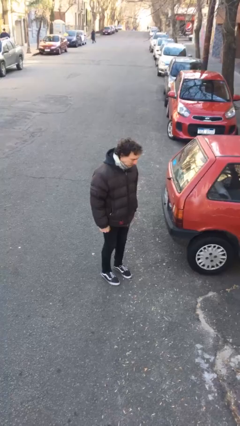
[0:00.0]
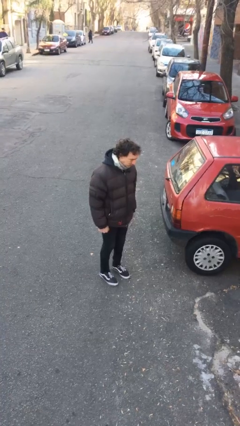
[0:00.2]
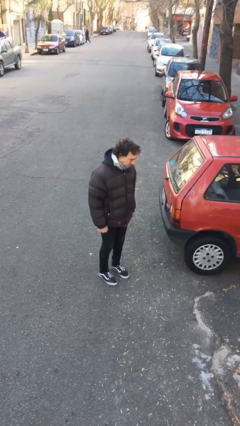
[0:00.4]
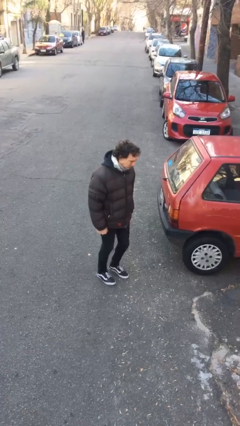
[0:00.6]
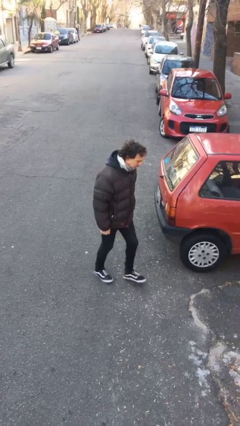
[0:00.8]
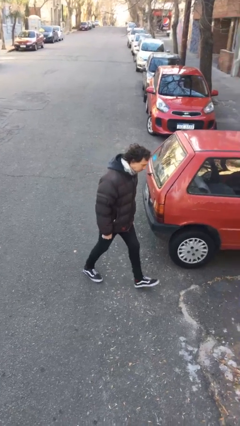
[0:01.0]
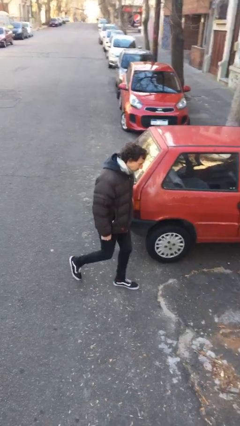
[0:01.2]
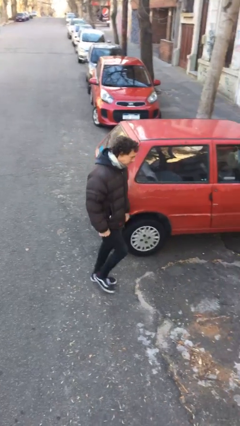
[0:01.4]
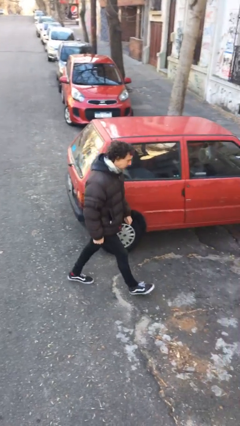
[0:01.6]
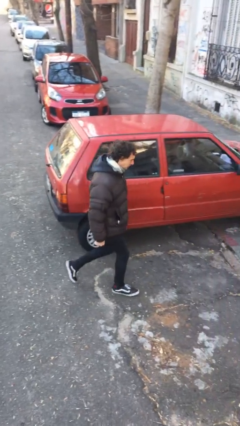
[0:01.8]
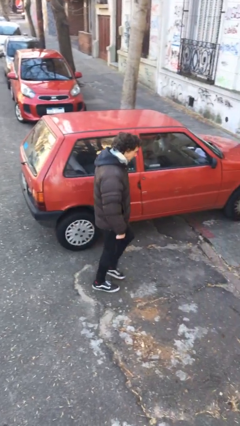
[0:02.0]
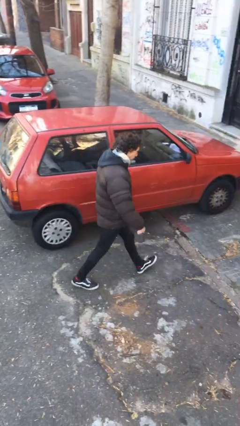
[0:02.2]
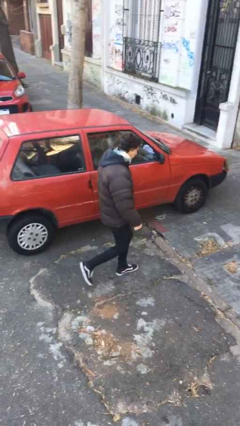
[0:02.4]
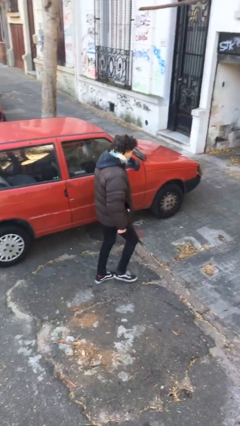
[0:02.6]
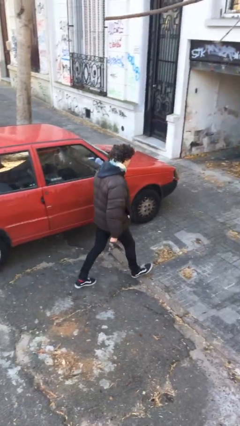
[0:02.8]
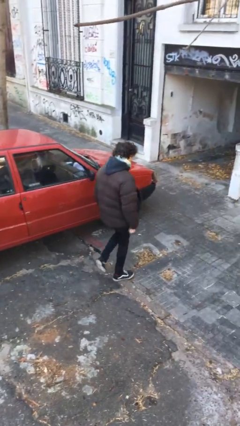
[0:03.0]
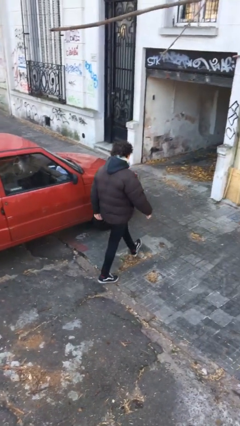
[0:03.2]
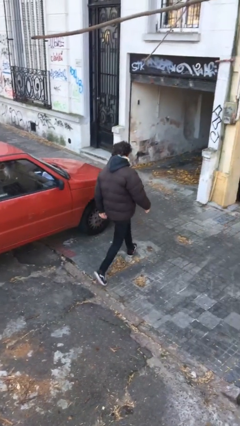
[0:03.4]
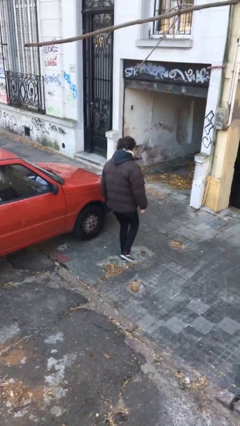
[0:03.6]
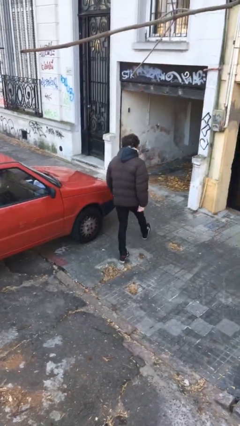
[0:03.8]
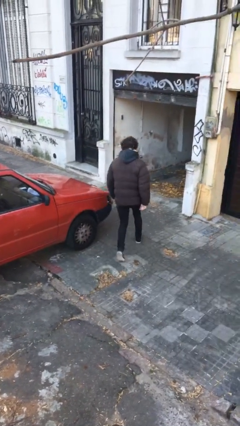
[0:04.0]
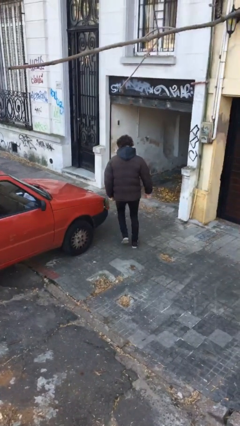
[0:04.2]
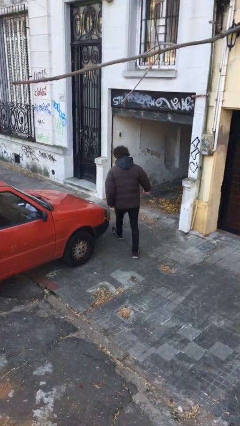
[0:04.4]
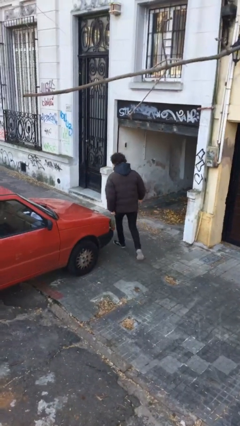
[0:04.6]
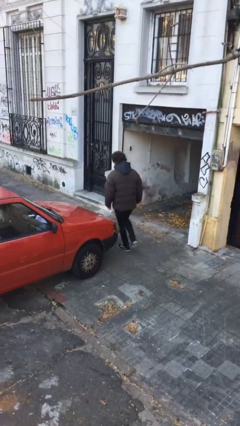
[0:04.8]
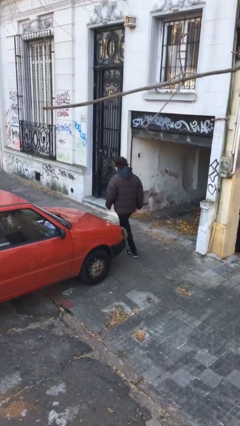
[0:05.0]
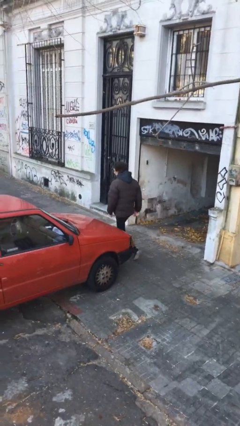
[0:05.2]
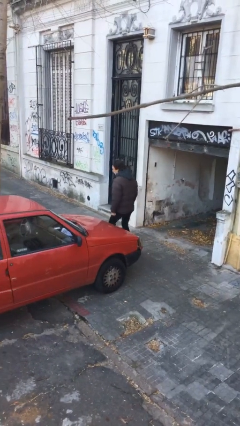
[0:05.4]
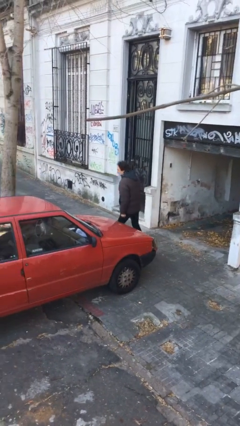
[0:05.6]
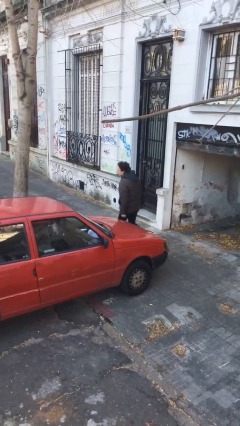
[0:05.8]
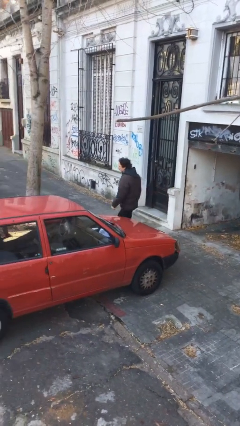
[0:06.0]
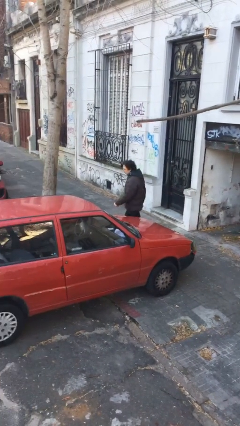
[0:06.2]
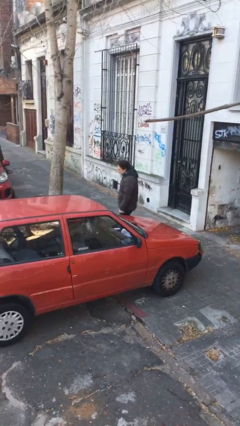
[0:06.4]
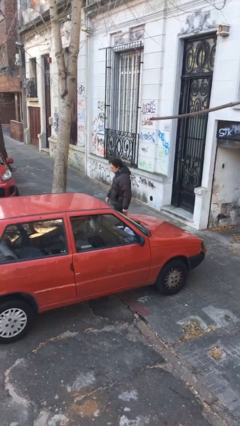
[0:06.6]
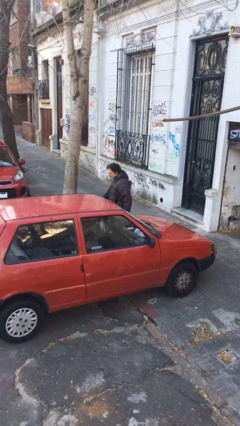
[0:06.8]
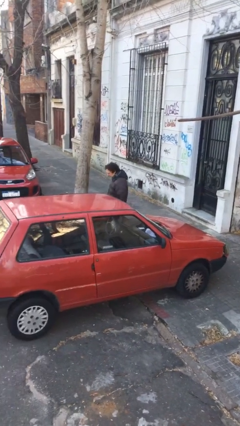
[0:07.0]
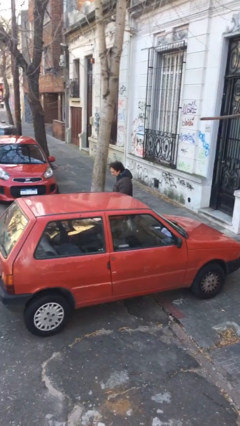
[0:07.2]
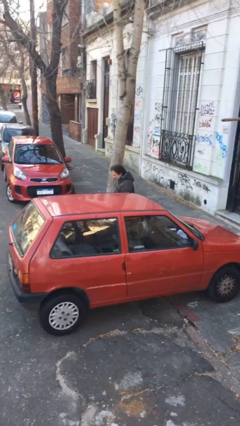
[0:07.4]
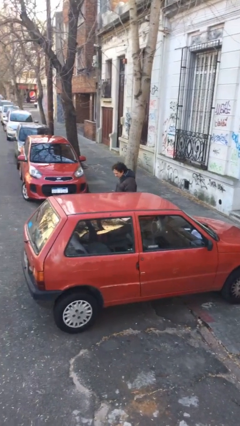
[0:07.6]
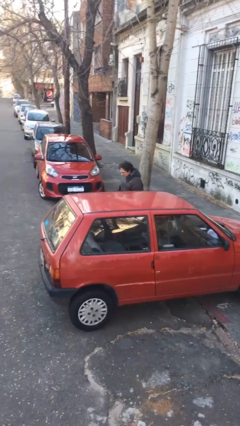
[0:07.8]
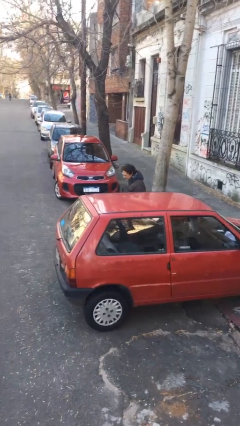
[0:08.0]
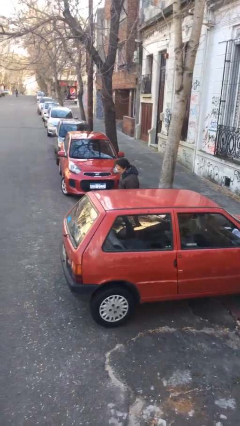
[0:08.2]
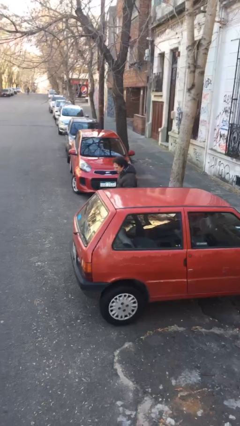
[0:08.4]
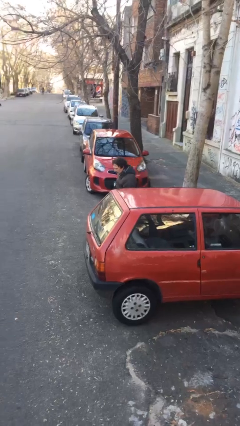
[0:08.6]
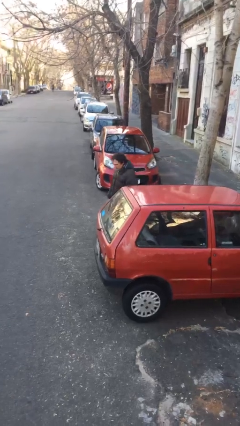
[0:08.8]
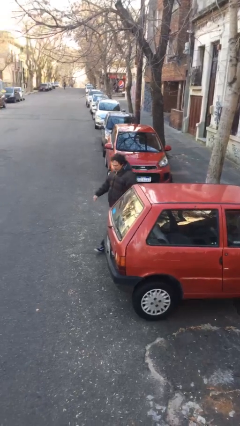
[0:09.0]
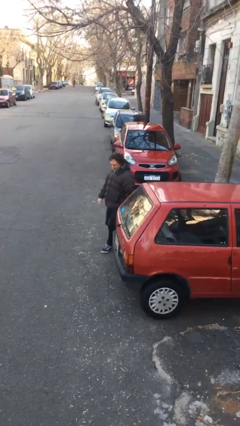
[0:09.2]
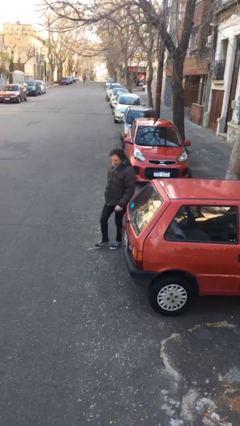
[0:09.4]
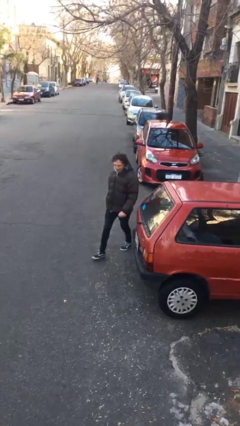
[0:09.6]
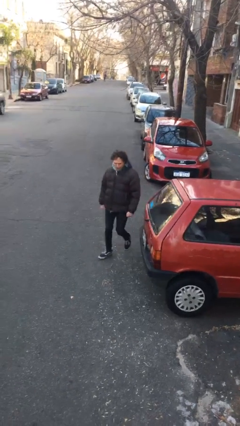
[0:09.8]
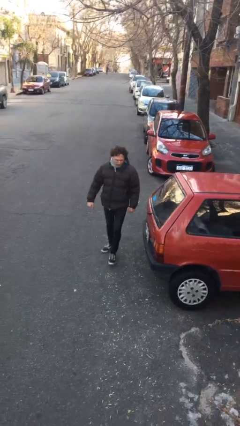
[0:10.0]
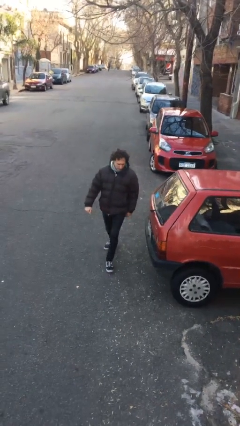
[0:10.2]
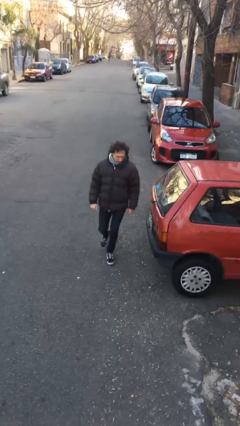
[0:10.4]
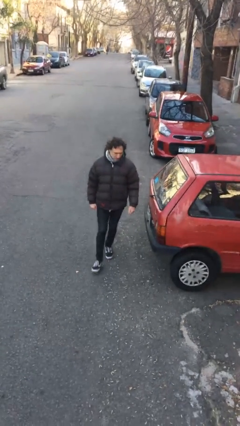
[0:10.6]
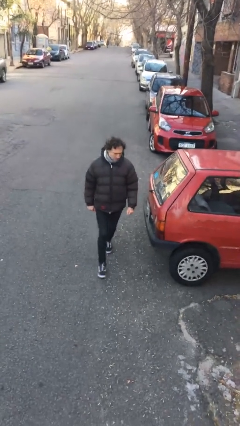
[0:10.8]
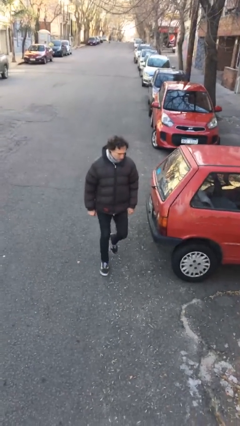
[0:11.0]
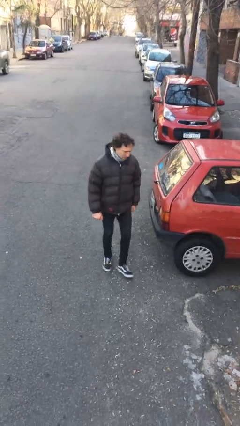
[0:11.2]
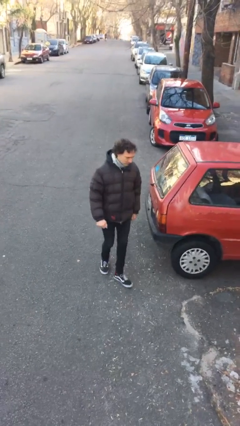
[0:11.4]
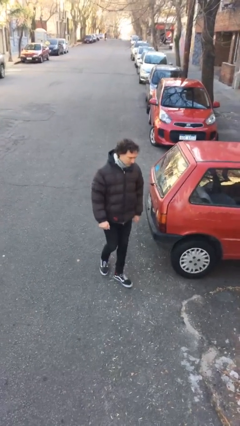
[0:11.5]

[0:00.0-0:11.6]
person walks around car

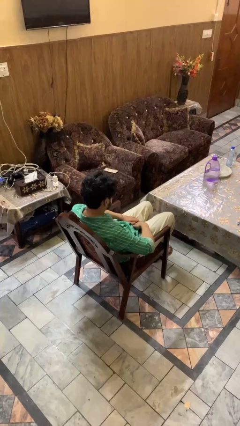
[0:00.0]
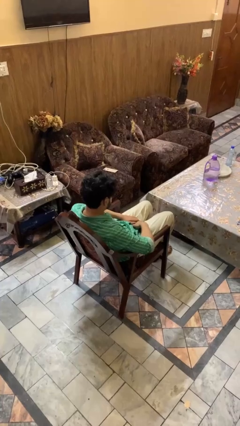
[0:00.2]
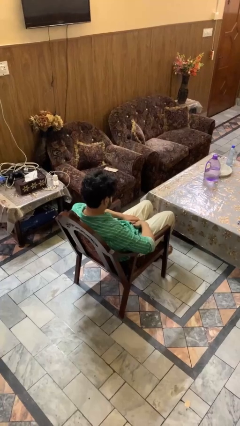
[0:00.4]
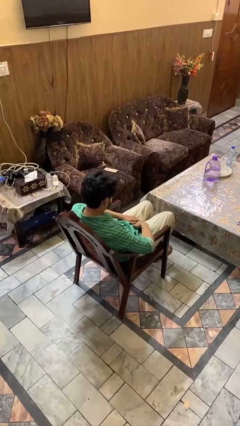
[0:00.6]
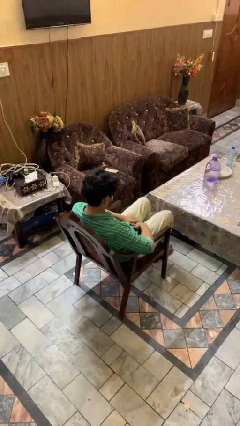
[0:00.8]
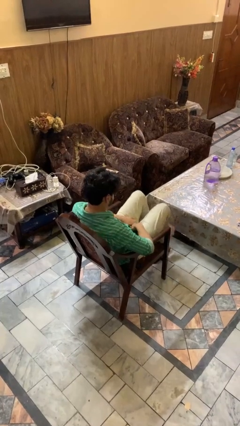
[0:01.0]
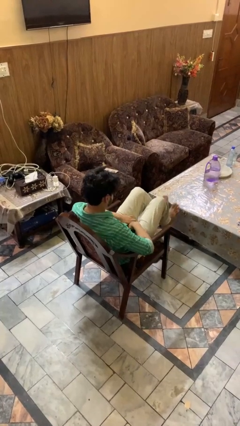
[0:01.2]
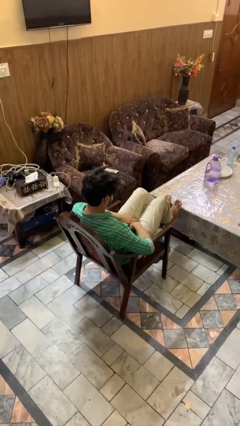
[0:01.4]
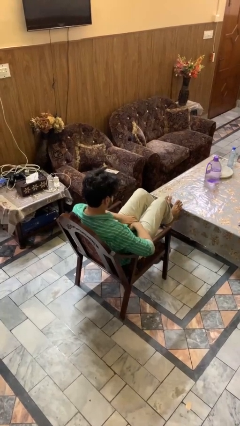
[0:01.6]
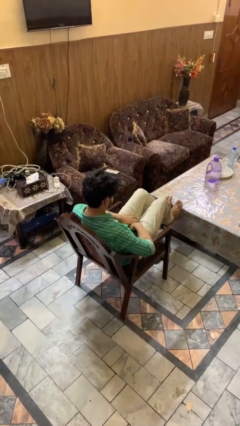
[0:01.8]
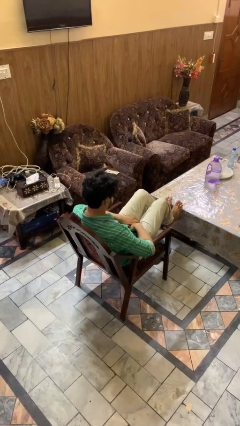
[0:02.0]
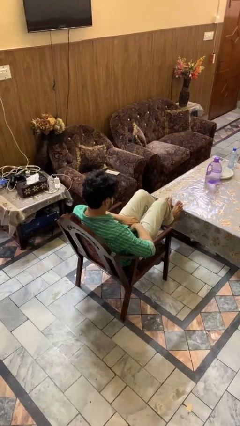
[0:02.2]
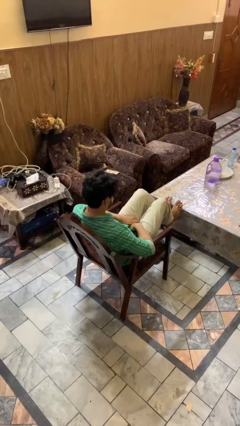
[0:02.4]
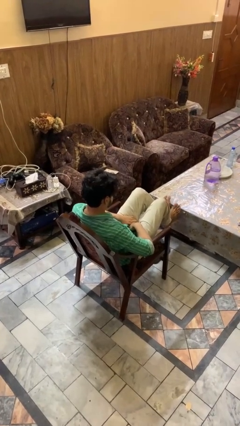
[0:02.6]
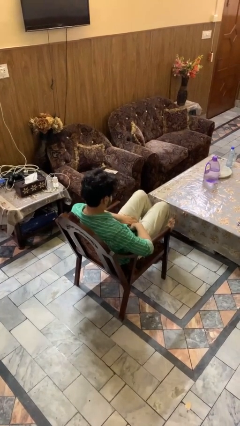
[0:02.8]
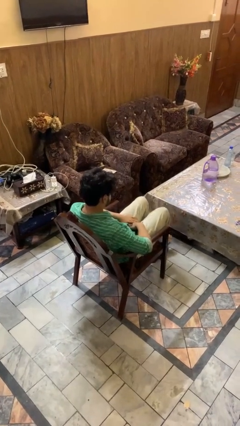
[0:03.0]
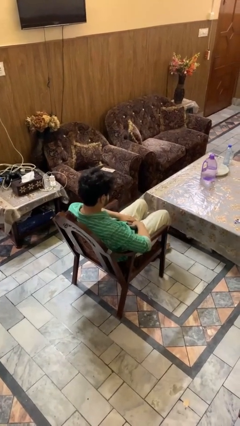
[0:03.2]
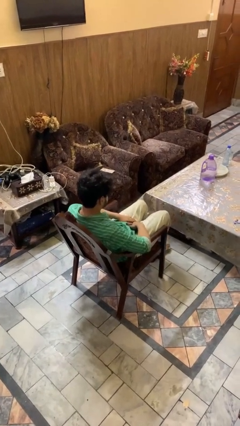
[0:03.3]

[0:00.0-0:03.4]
person puts feet up

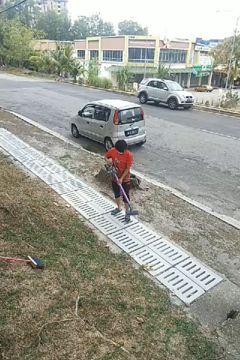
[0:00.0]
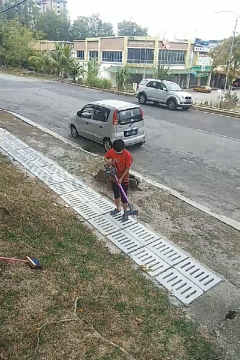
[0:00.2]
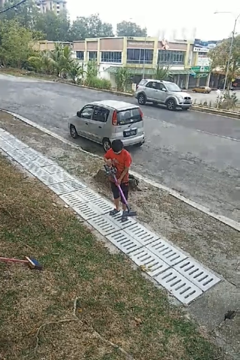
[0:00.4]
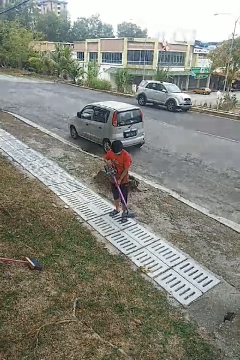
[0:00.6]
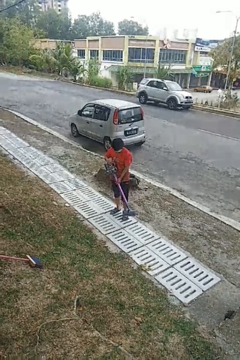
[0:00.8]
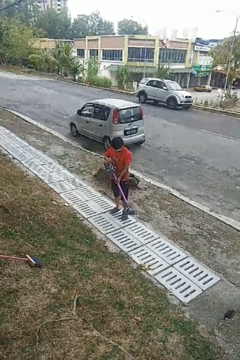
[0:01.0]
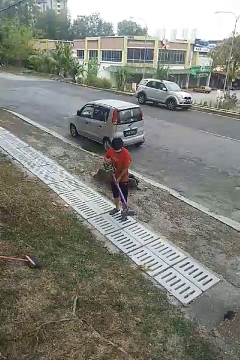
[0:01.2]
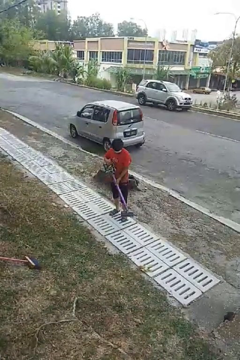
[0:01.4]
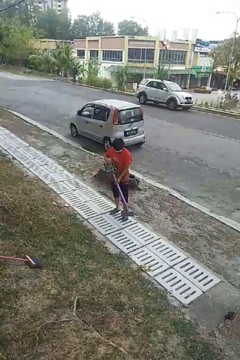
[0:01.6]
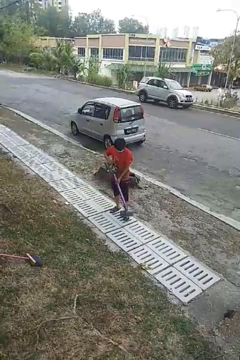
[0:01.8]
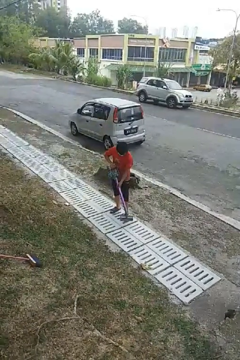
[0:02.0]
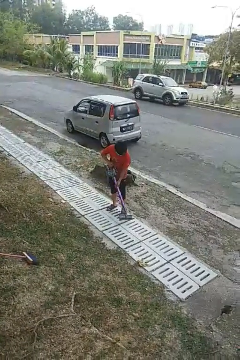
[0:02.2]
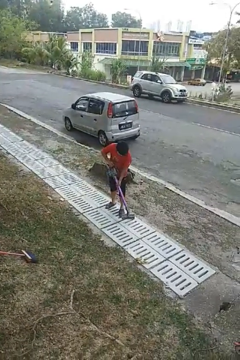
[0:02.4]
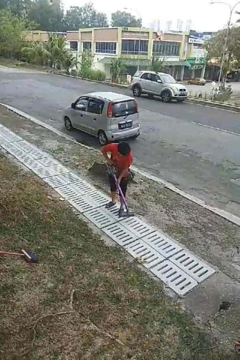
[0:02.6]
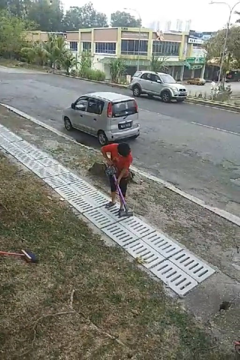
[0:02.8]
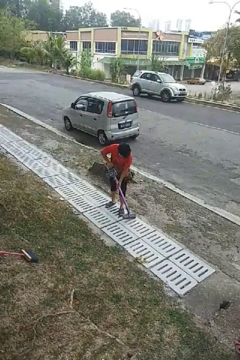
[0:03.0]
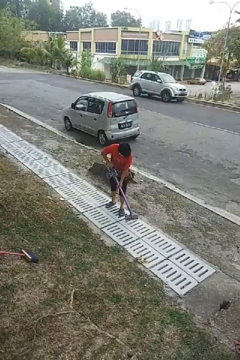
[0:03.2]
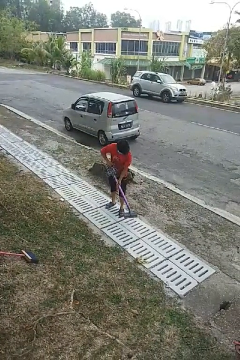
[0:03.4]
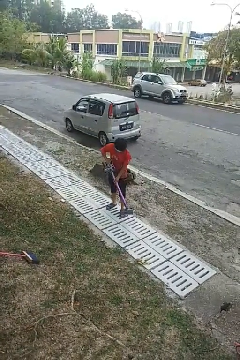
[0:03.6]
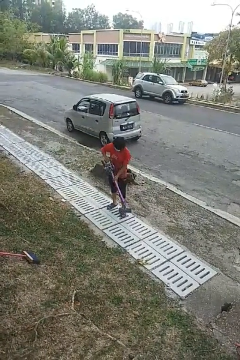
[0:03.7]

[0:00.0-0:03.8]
person vacuums carpet

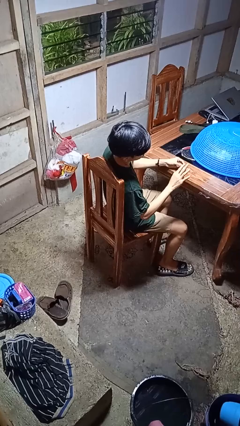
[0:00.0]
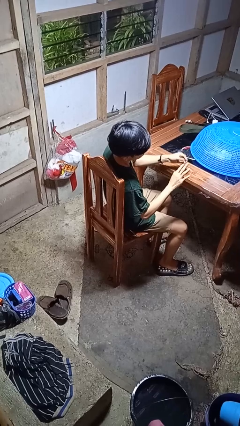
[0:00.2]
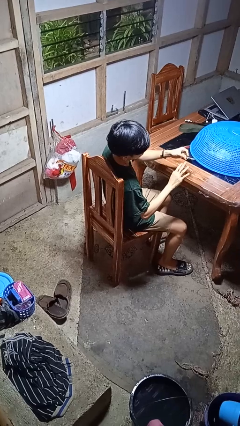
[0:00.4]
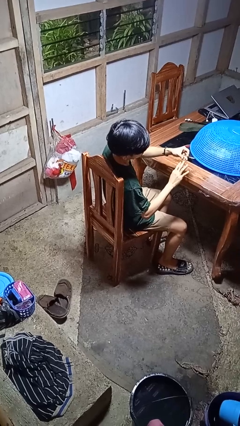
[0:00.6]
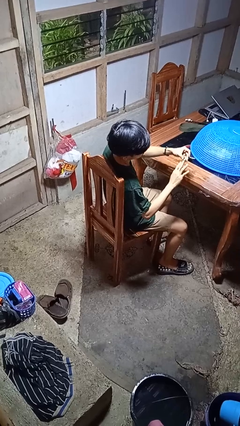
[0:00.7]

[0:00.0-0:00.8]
person puts on ring
